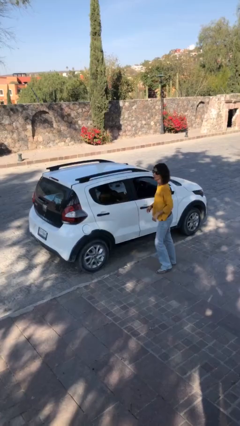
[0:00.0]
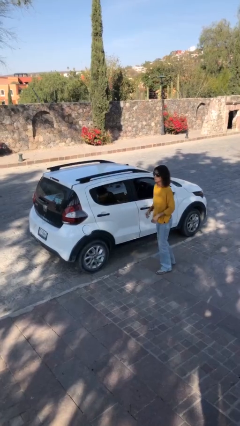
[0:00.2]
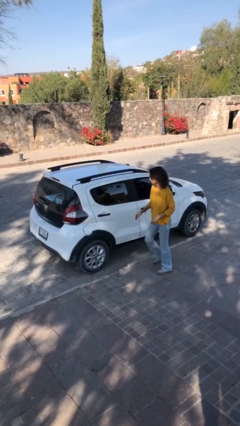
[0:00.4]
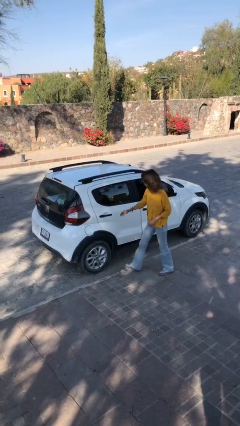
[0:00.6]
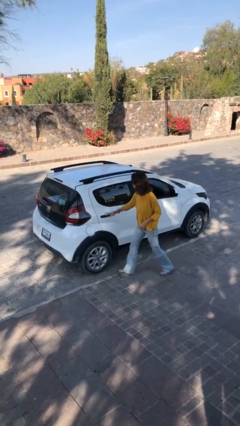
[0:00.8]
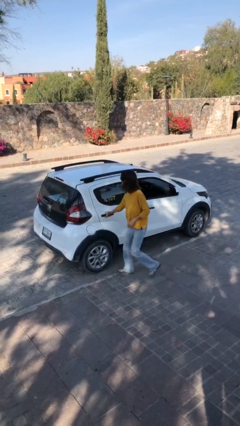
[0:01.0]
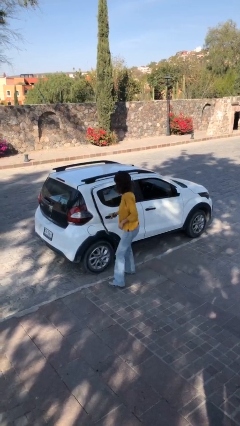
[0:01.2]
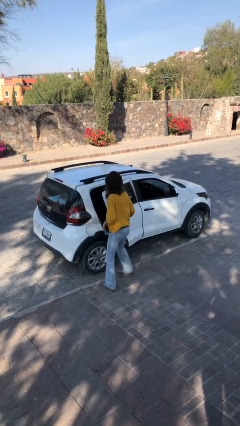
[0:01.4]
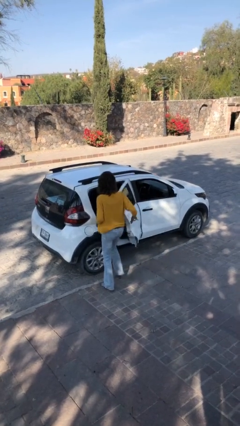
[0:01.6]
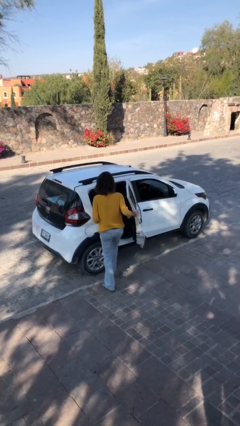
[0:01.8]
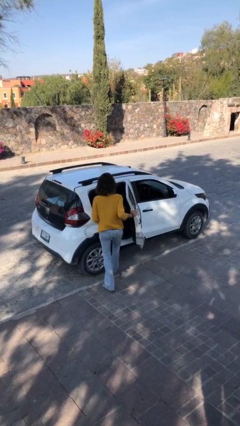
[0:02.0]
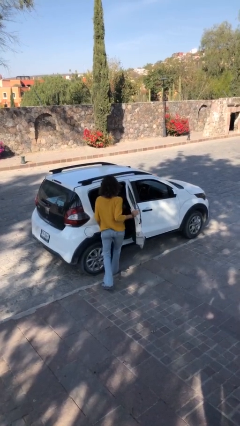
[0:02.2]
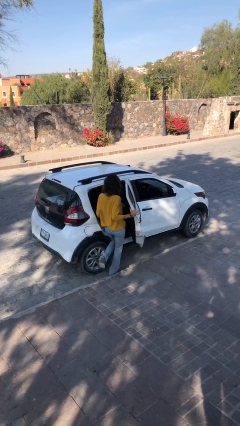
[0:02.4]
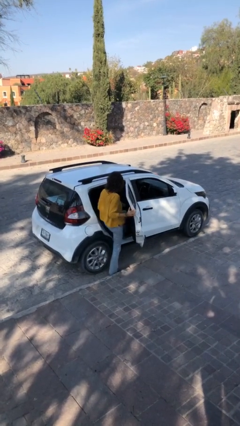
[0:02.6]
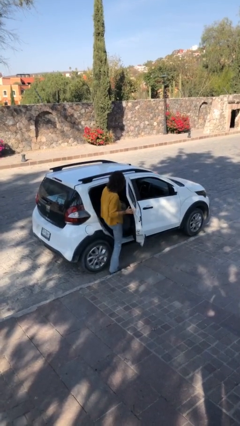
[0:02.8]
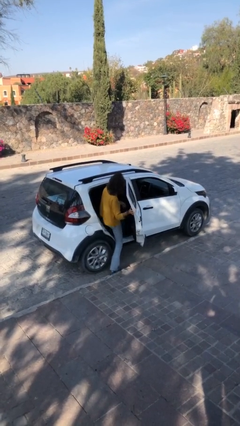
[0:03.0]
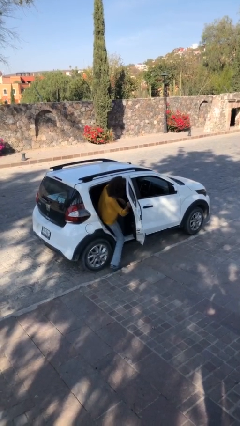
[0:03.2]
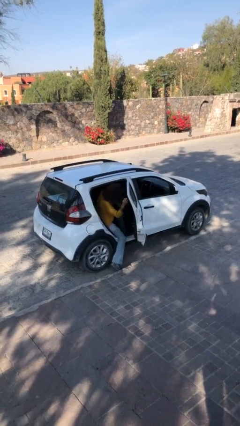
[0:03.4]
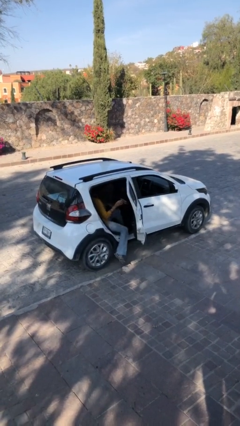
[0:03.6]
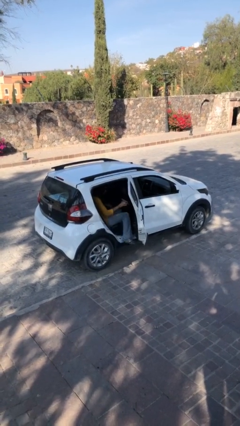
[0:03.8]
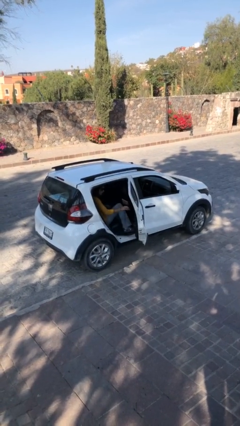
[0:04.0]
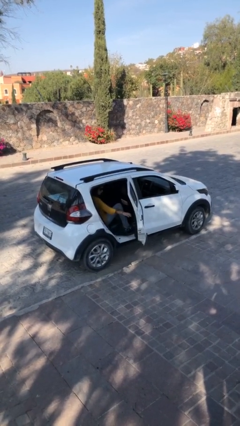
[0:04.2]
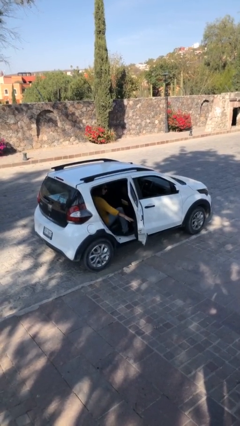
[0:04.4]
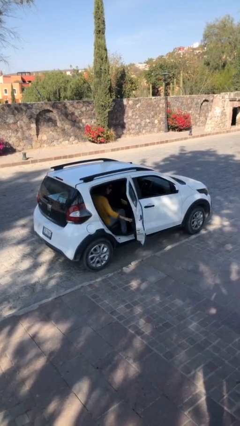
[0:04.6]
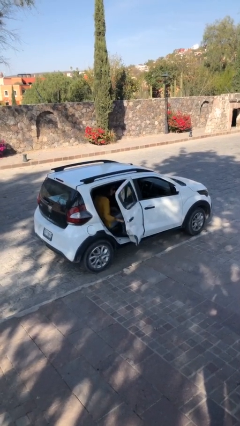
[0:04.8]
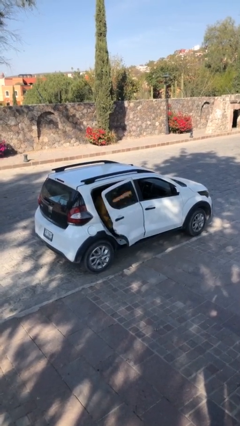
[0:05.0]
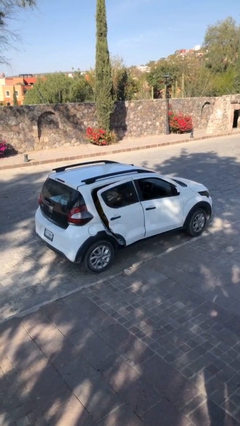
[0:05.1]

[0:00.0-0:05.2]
car picks up person

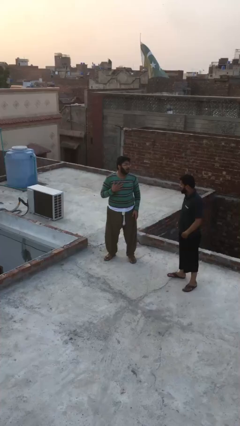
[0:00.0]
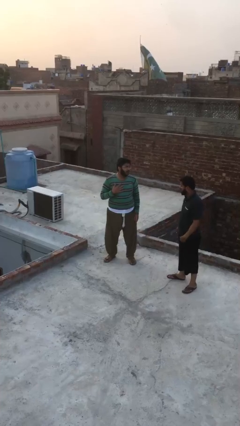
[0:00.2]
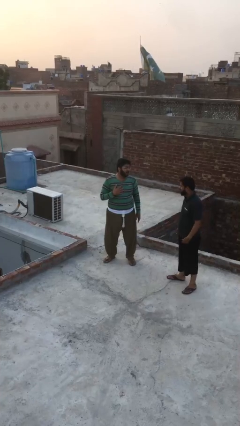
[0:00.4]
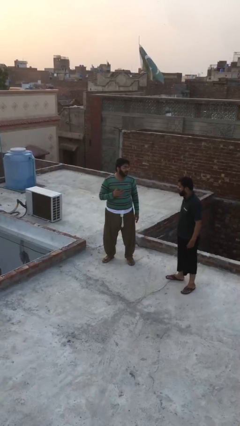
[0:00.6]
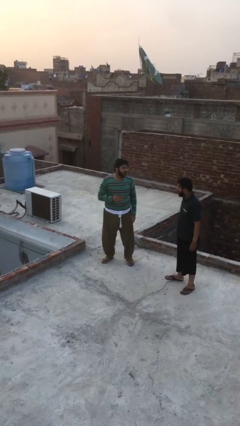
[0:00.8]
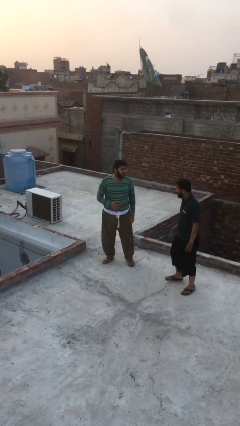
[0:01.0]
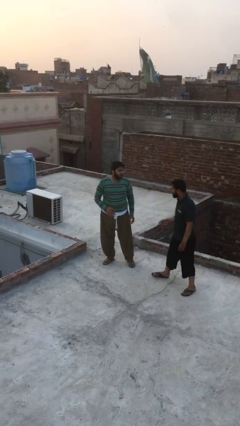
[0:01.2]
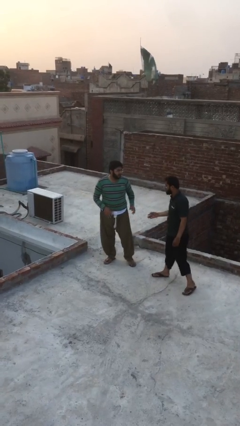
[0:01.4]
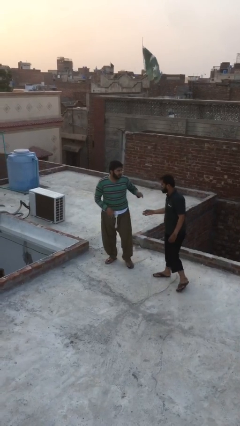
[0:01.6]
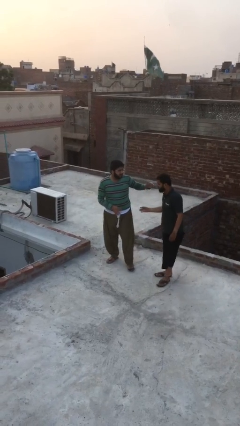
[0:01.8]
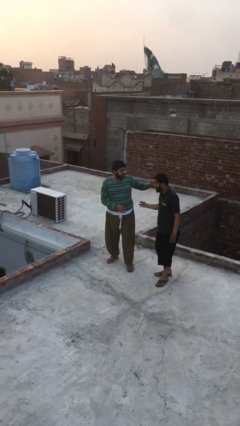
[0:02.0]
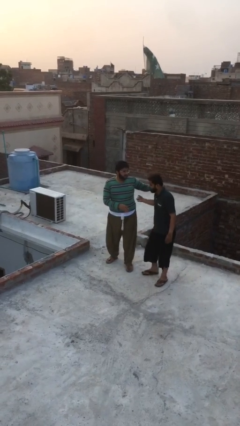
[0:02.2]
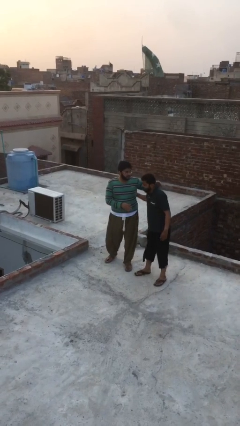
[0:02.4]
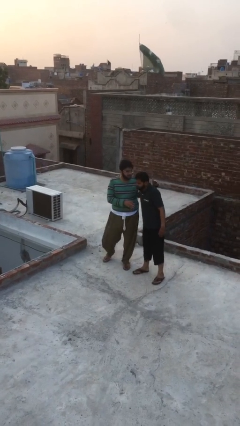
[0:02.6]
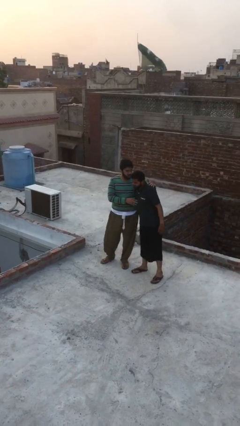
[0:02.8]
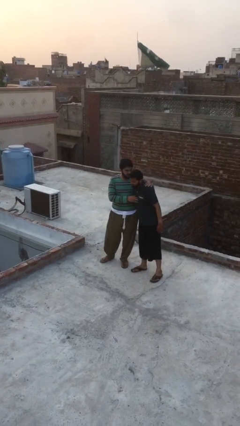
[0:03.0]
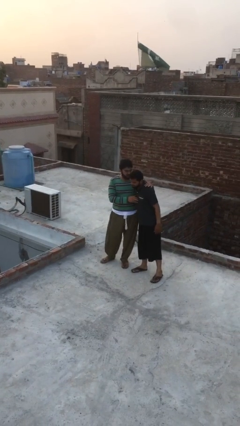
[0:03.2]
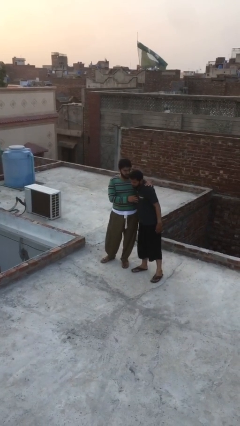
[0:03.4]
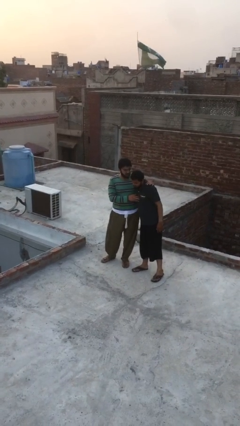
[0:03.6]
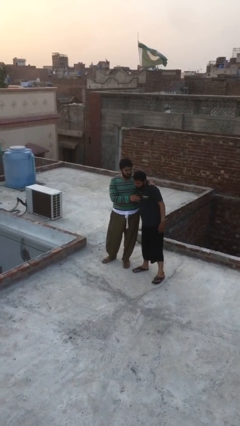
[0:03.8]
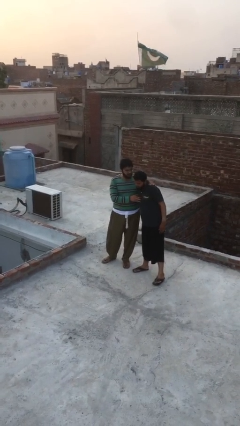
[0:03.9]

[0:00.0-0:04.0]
person embraces person

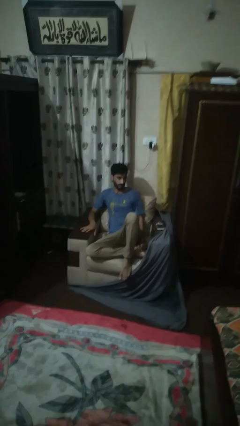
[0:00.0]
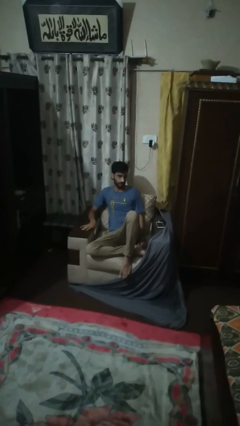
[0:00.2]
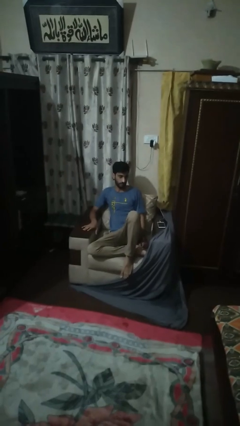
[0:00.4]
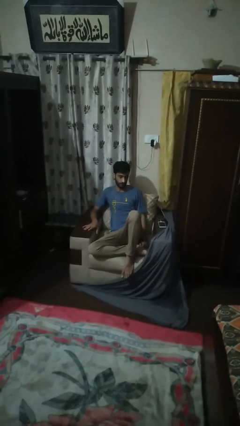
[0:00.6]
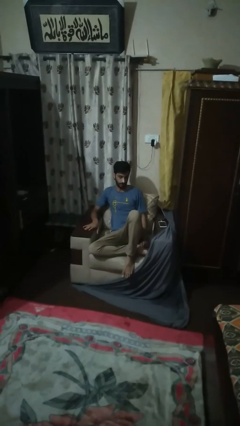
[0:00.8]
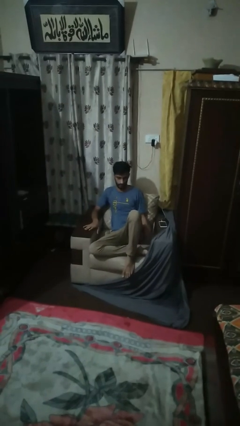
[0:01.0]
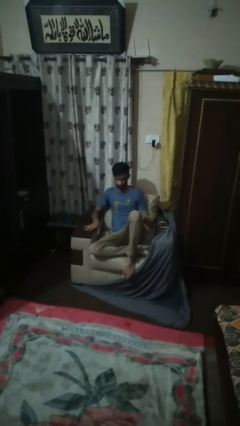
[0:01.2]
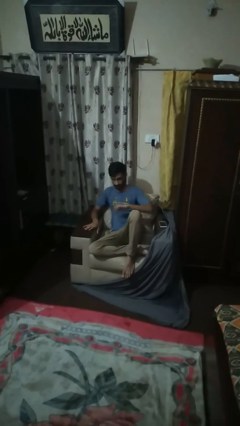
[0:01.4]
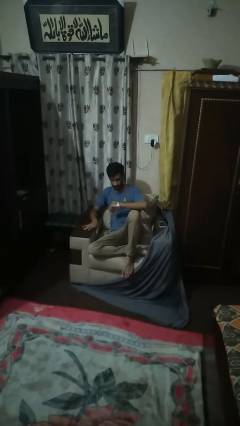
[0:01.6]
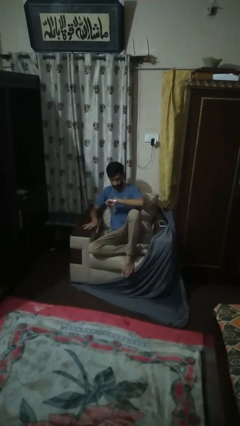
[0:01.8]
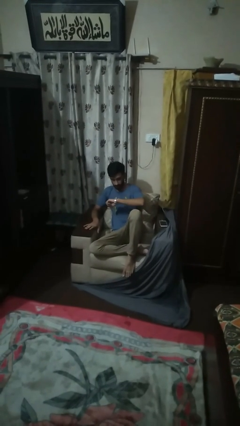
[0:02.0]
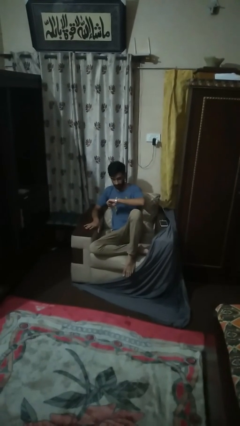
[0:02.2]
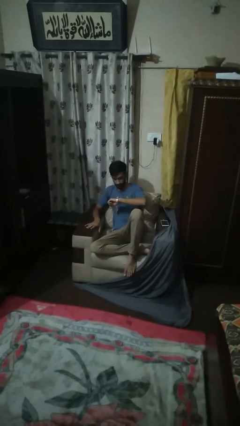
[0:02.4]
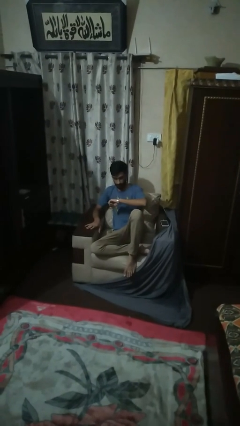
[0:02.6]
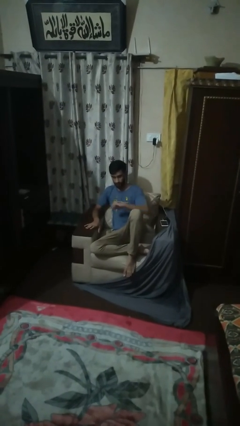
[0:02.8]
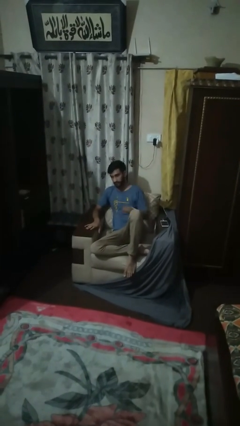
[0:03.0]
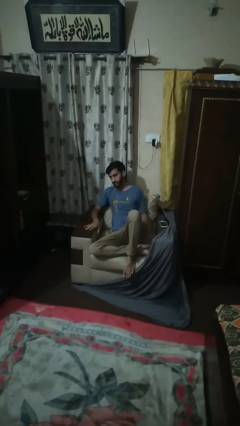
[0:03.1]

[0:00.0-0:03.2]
person looks at wristwatch

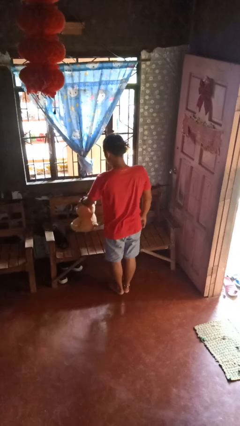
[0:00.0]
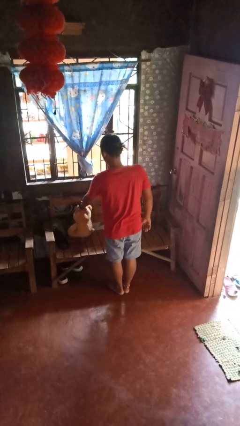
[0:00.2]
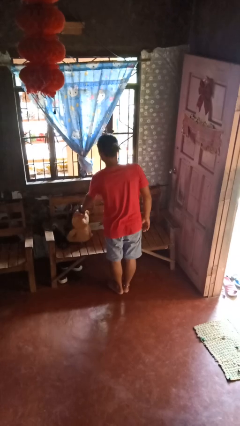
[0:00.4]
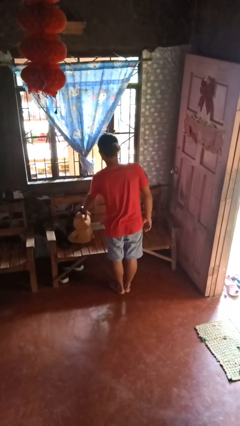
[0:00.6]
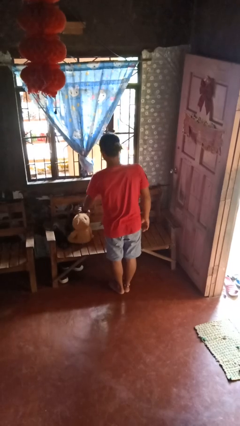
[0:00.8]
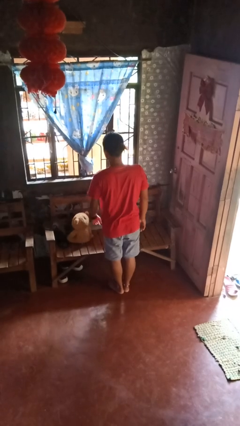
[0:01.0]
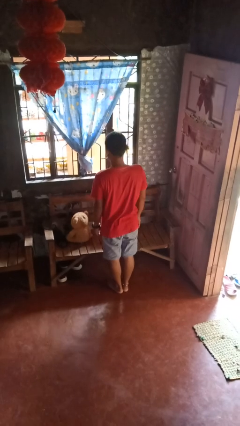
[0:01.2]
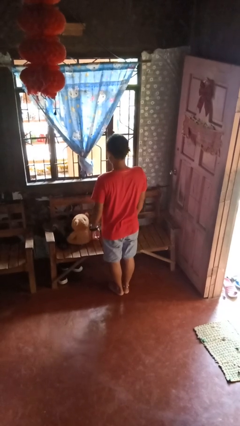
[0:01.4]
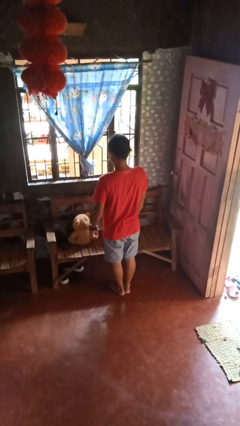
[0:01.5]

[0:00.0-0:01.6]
person puts down object on couch

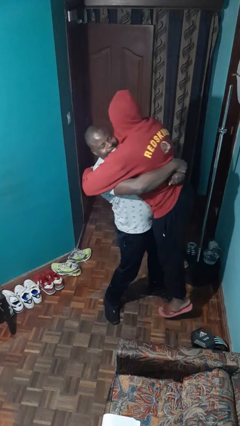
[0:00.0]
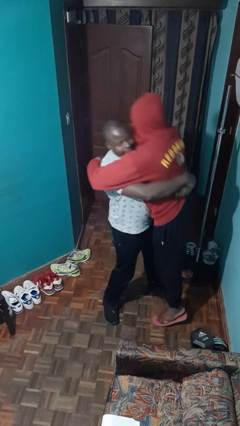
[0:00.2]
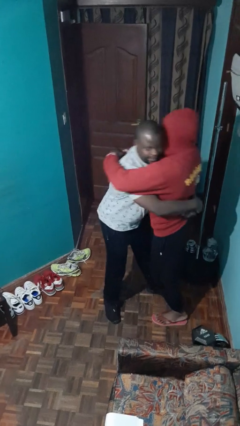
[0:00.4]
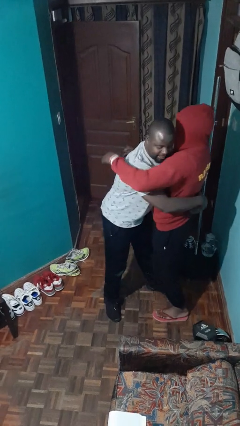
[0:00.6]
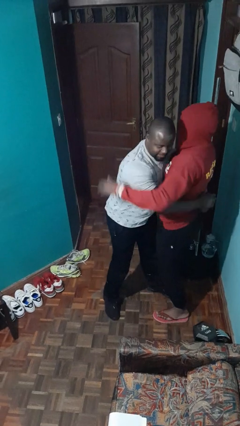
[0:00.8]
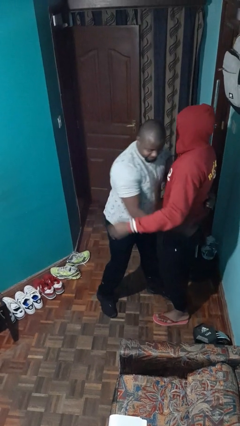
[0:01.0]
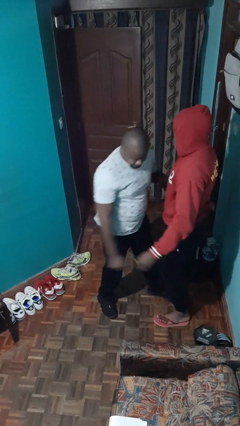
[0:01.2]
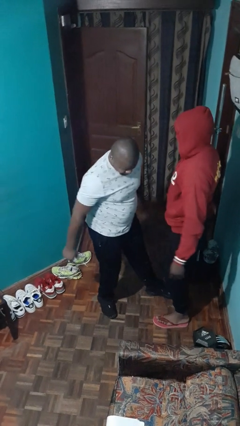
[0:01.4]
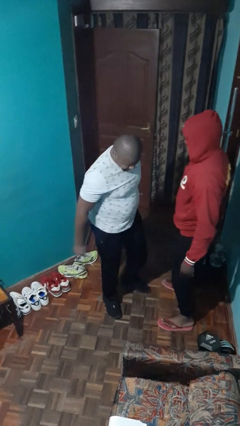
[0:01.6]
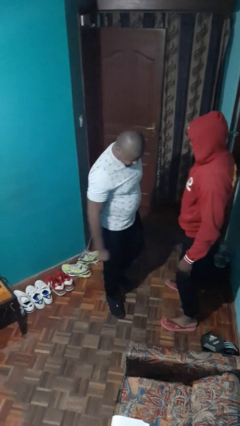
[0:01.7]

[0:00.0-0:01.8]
person puts down person

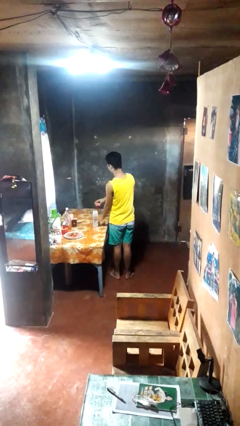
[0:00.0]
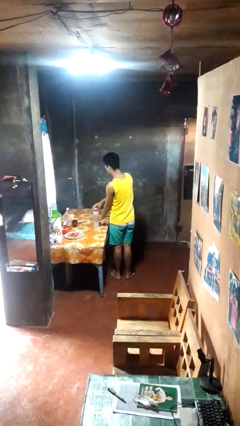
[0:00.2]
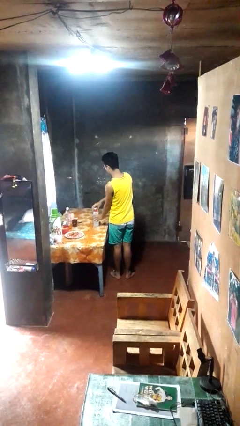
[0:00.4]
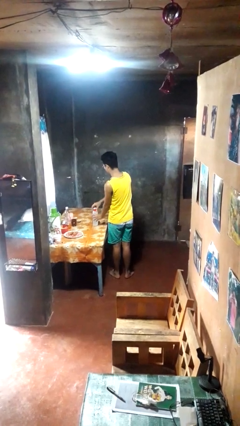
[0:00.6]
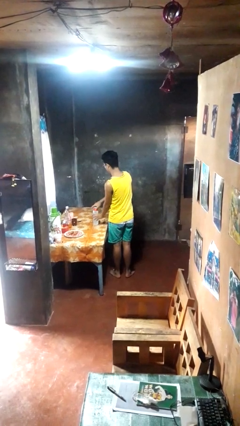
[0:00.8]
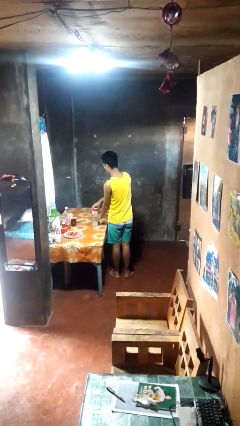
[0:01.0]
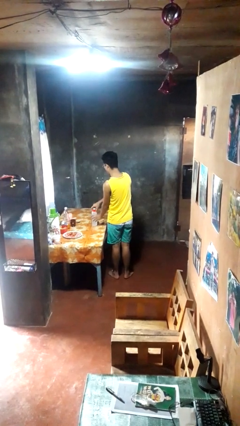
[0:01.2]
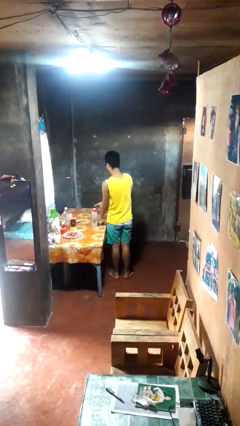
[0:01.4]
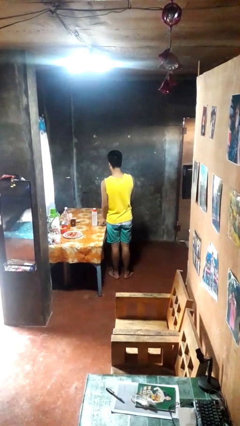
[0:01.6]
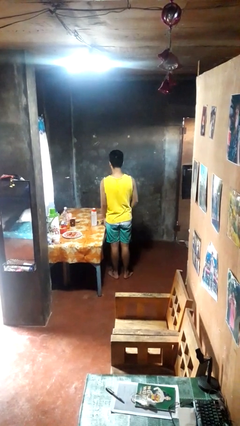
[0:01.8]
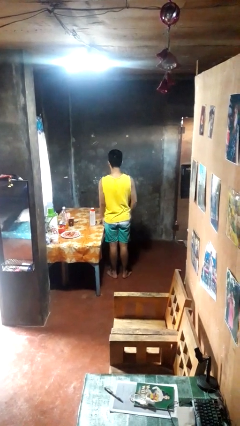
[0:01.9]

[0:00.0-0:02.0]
person closes jar
